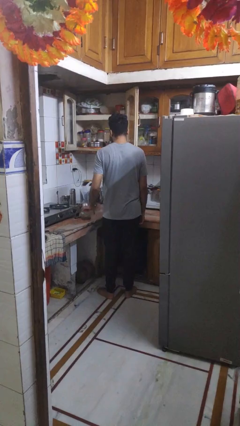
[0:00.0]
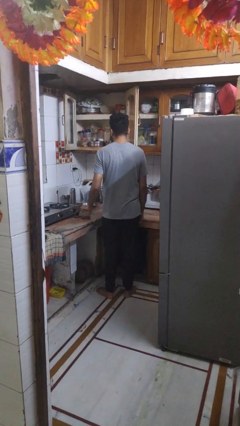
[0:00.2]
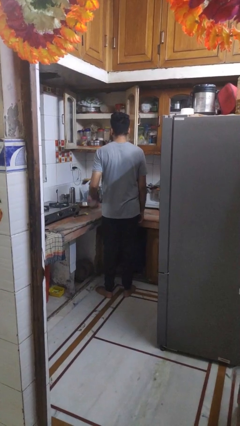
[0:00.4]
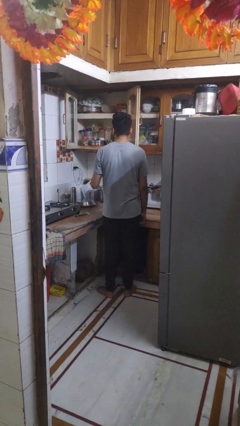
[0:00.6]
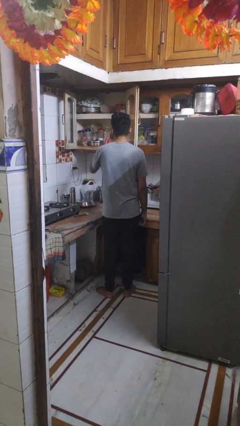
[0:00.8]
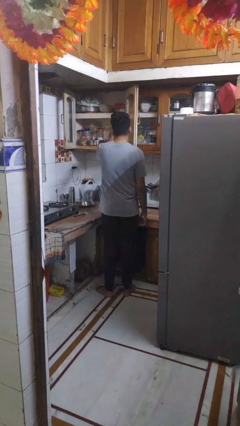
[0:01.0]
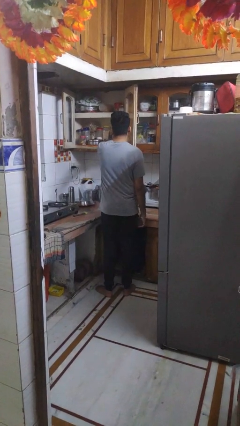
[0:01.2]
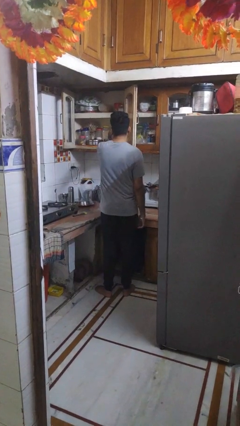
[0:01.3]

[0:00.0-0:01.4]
person puts object in cabinet

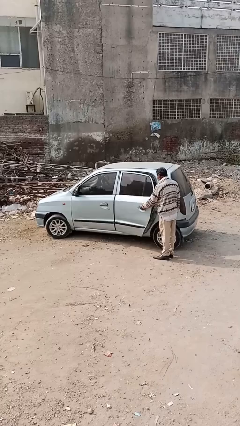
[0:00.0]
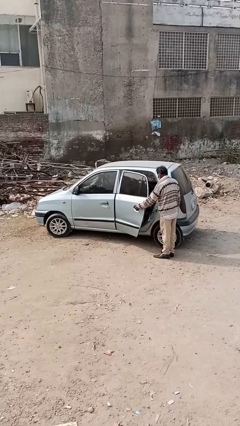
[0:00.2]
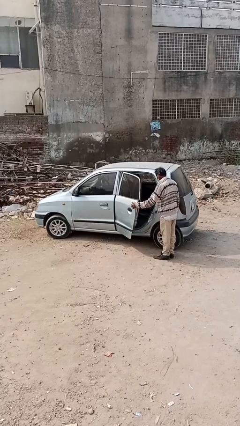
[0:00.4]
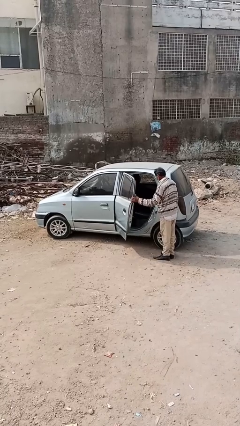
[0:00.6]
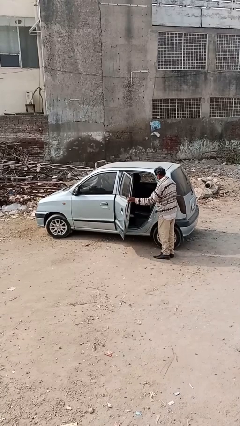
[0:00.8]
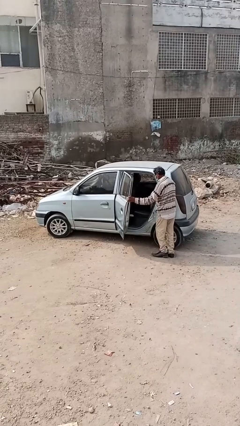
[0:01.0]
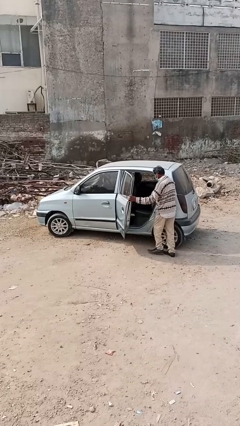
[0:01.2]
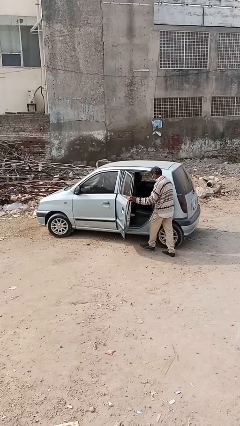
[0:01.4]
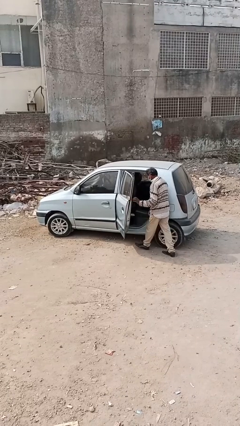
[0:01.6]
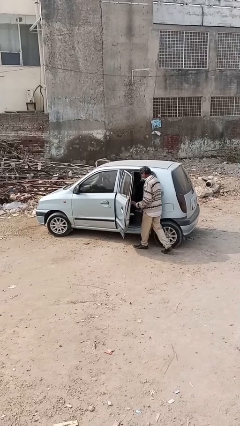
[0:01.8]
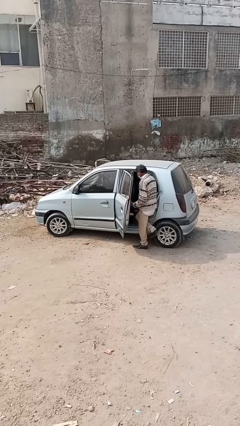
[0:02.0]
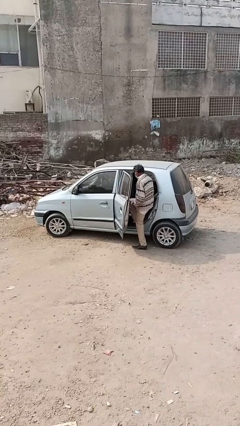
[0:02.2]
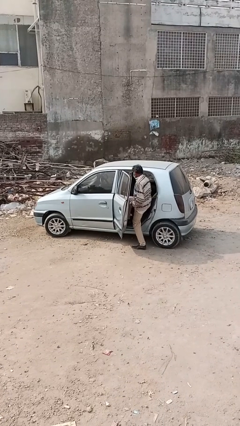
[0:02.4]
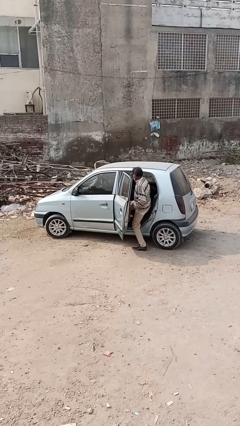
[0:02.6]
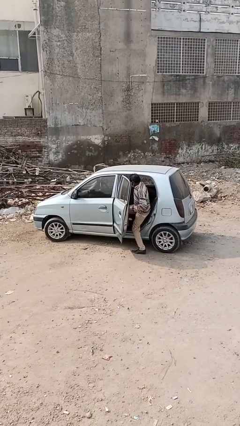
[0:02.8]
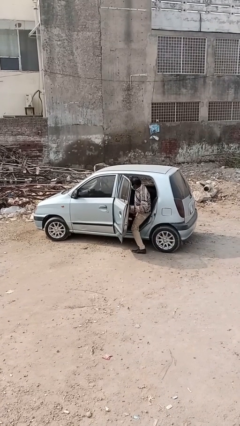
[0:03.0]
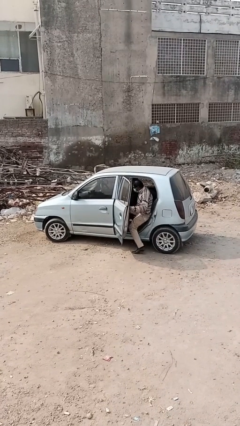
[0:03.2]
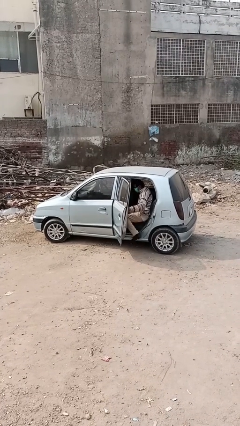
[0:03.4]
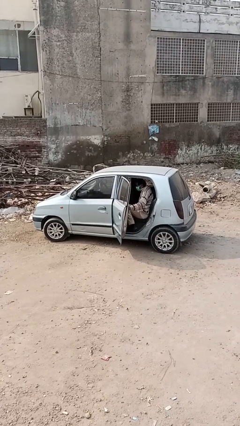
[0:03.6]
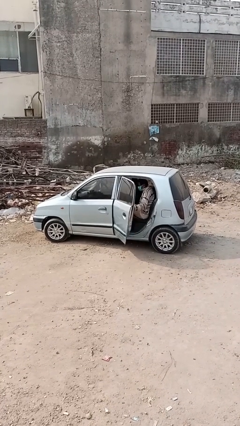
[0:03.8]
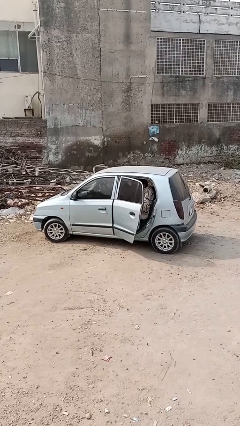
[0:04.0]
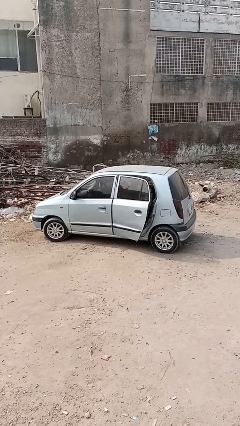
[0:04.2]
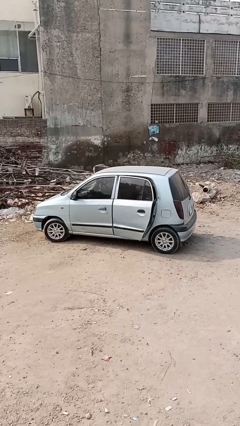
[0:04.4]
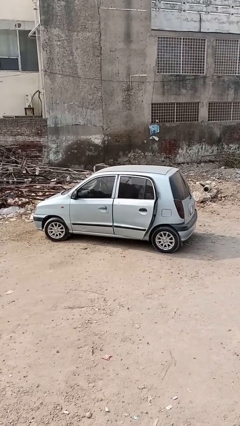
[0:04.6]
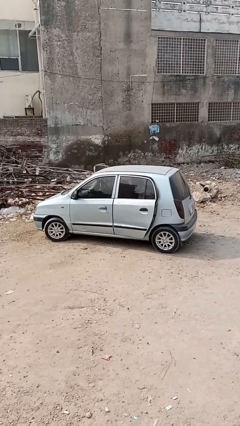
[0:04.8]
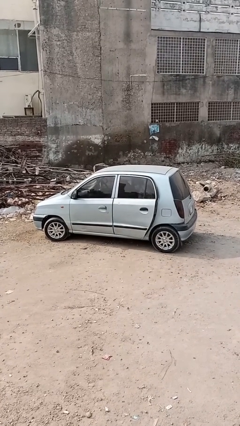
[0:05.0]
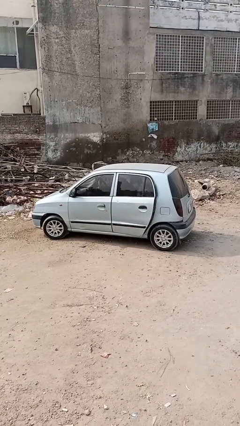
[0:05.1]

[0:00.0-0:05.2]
car picks up person

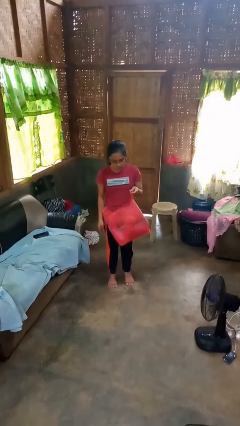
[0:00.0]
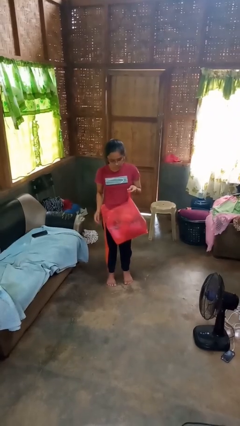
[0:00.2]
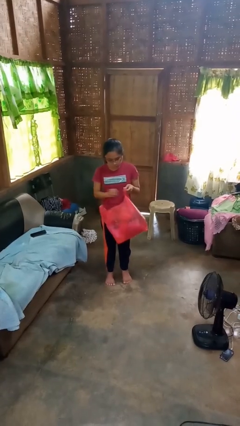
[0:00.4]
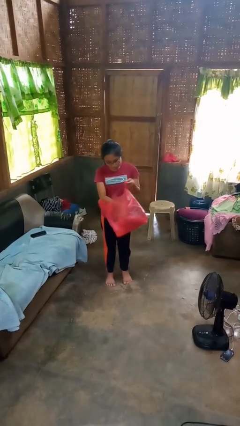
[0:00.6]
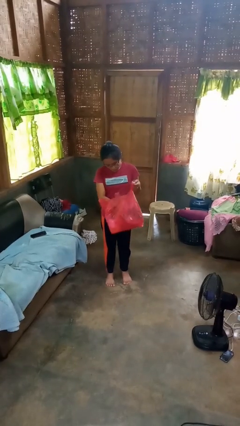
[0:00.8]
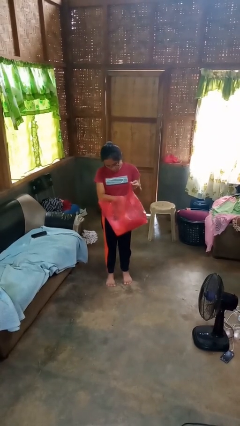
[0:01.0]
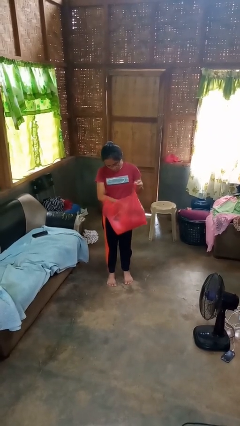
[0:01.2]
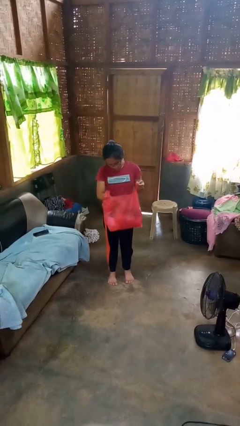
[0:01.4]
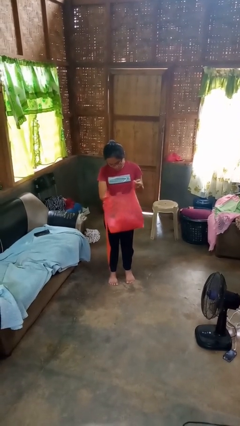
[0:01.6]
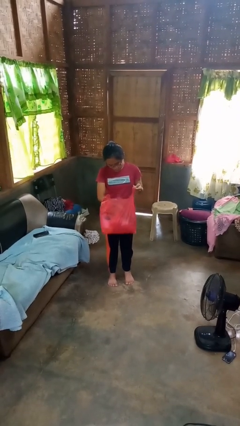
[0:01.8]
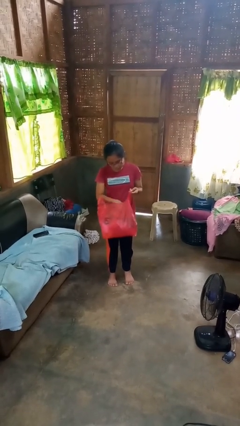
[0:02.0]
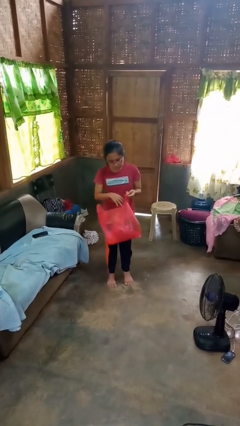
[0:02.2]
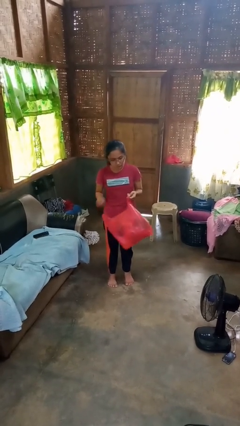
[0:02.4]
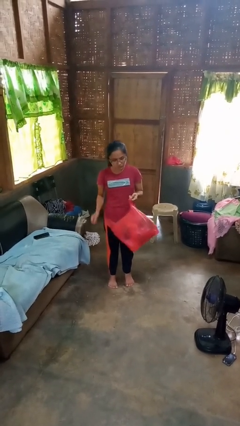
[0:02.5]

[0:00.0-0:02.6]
person searches in bag

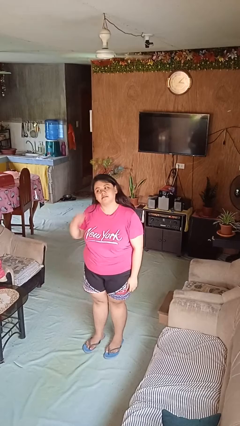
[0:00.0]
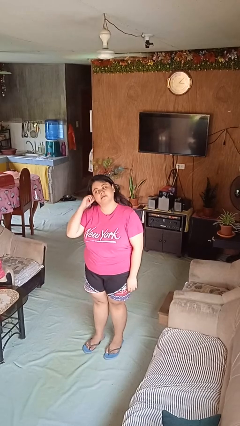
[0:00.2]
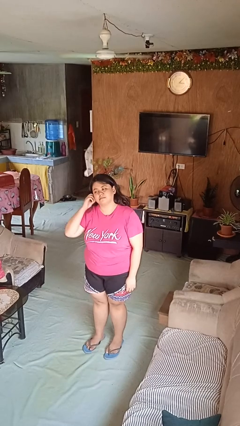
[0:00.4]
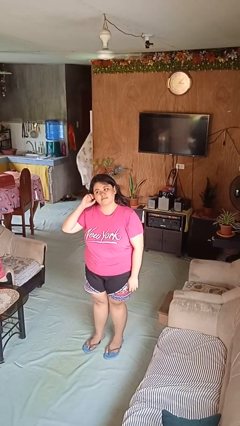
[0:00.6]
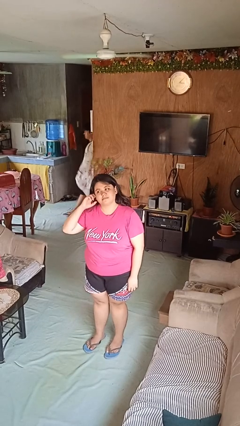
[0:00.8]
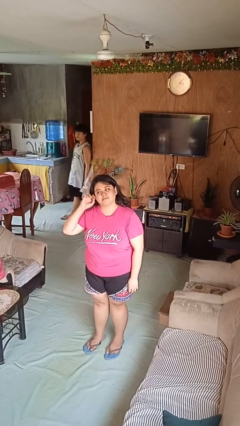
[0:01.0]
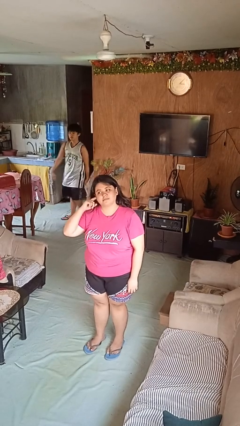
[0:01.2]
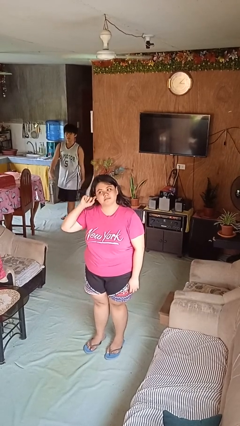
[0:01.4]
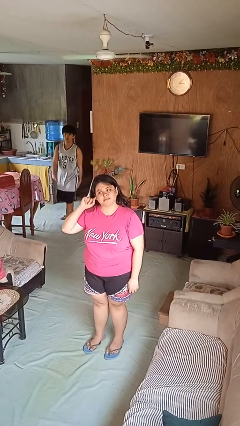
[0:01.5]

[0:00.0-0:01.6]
person touches earlobe

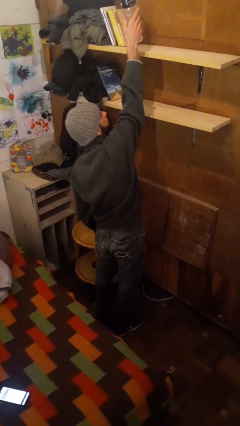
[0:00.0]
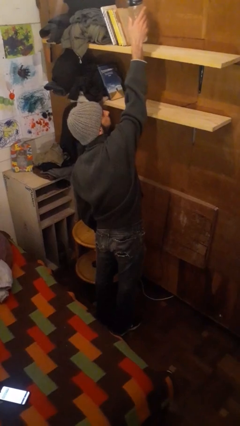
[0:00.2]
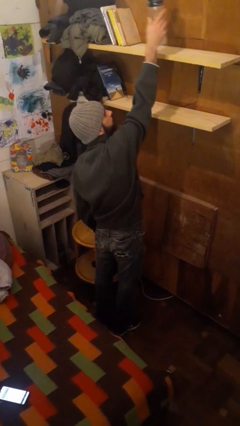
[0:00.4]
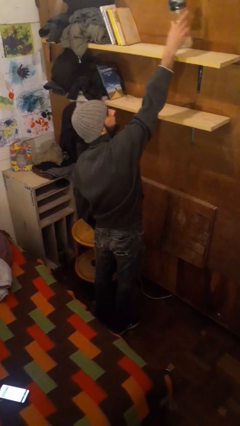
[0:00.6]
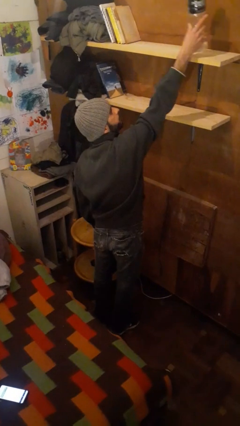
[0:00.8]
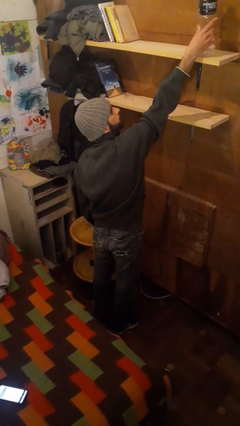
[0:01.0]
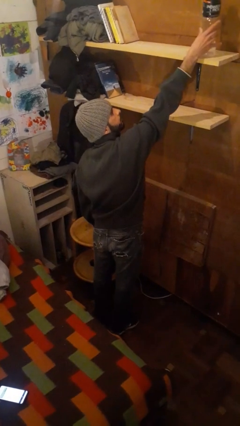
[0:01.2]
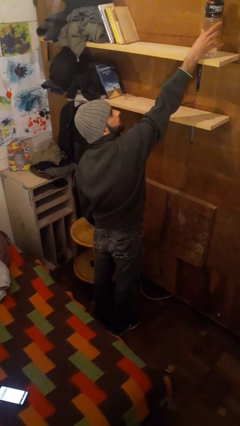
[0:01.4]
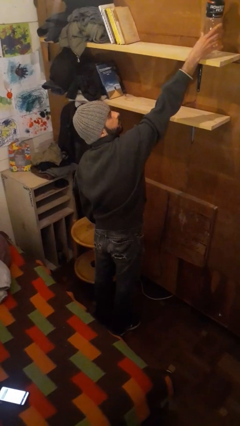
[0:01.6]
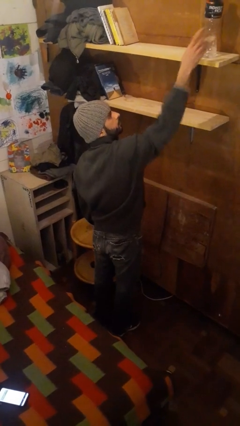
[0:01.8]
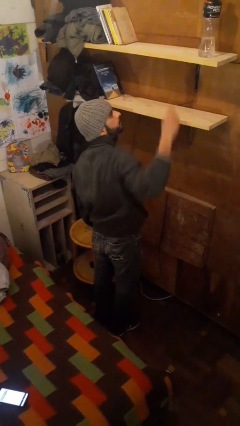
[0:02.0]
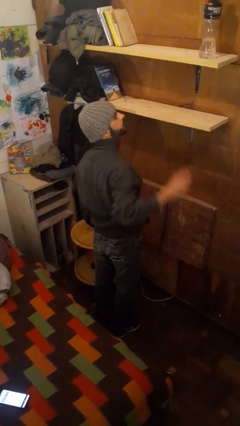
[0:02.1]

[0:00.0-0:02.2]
person puts down object on shelf

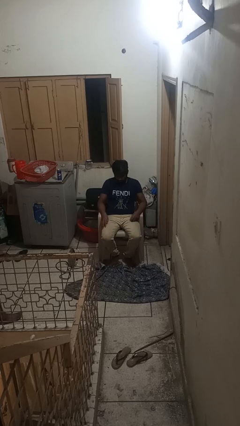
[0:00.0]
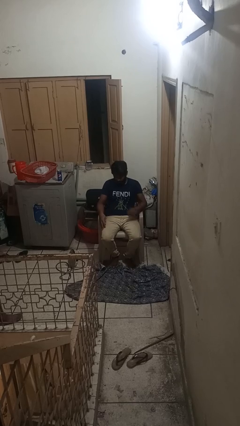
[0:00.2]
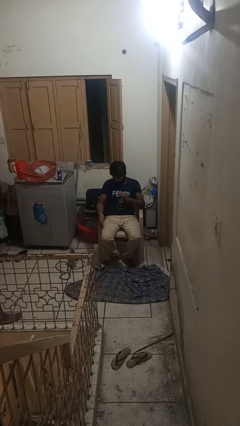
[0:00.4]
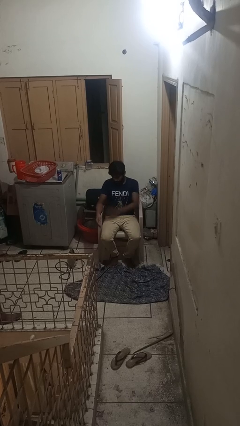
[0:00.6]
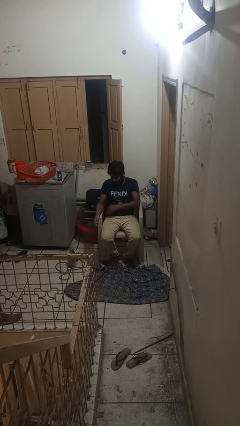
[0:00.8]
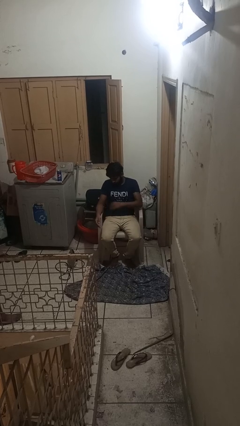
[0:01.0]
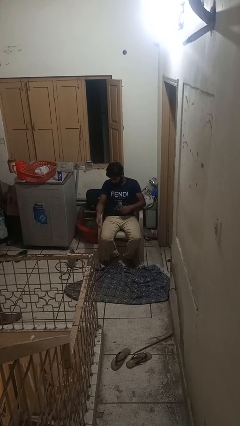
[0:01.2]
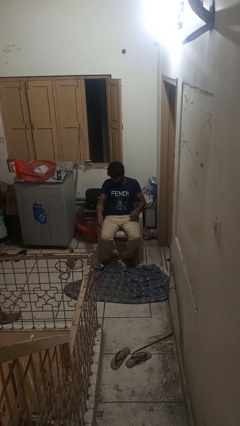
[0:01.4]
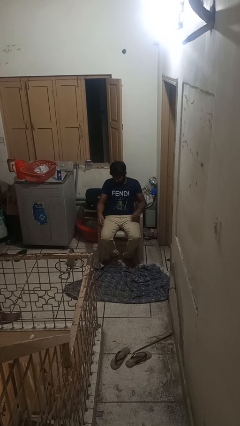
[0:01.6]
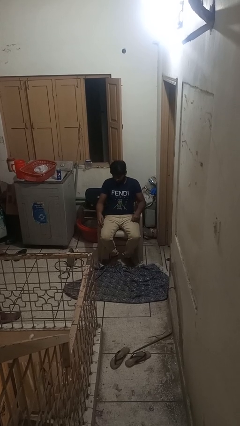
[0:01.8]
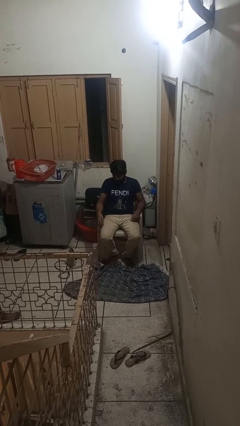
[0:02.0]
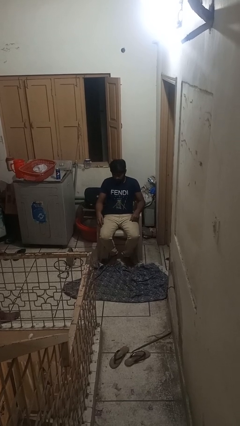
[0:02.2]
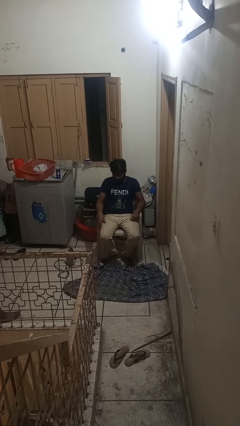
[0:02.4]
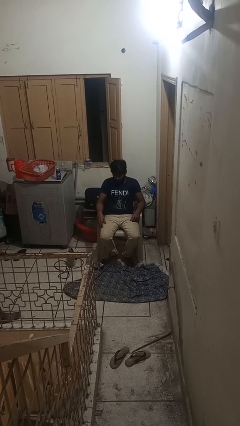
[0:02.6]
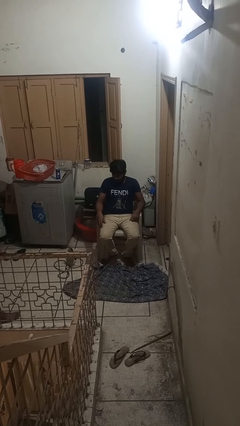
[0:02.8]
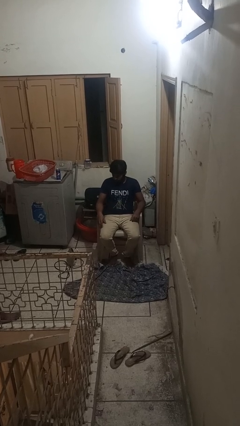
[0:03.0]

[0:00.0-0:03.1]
person swats bug

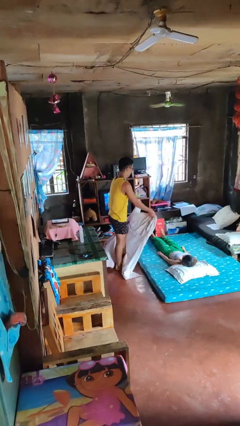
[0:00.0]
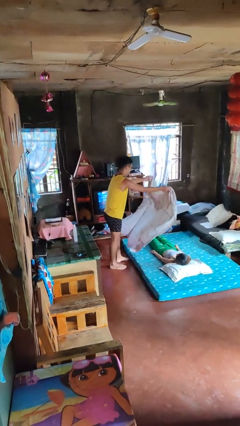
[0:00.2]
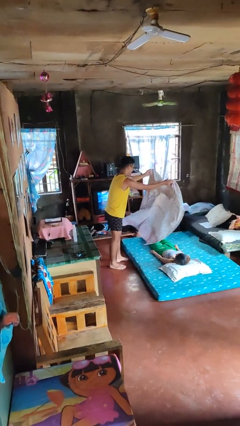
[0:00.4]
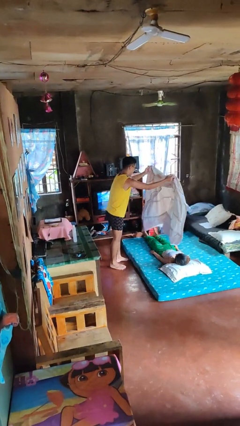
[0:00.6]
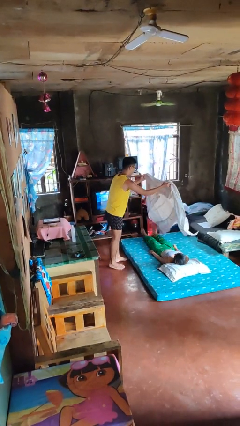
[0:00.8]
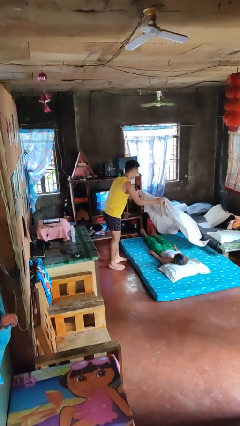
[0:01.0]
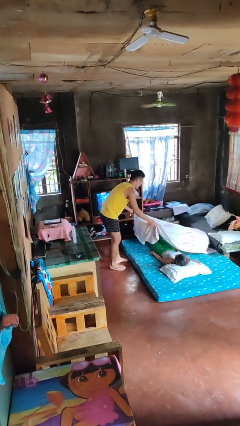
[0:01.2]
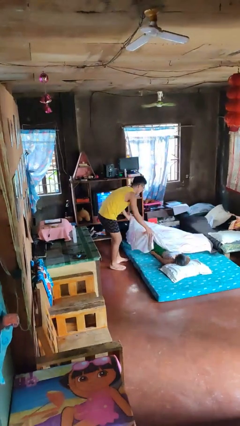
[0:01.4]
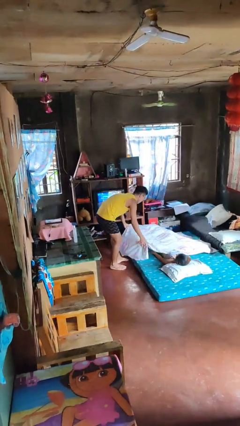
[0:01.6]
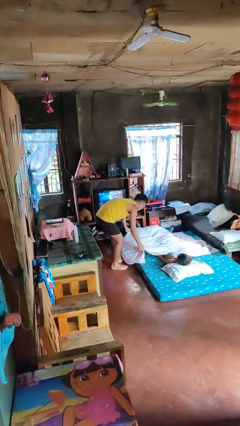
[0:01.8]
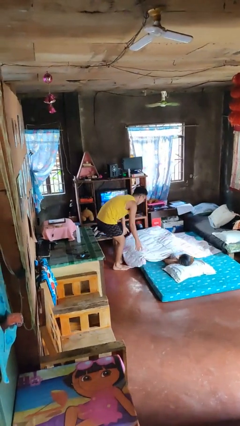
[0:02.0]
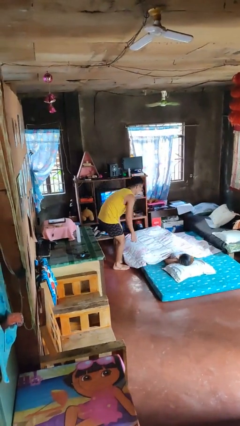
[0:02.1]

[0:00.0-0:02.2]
person covers friend with blanket
